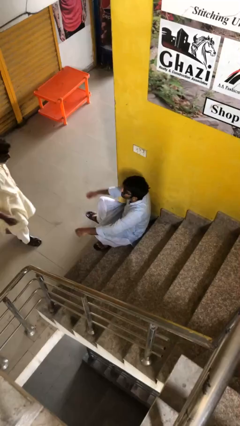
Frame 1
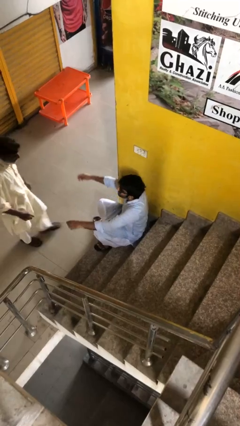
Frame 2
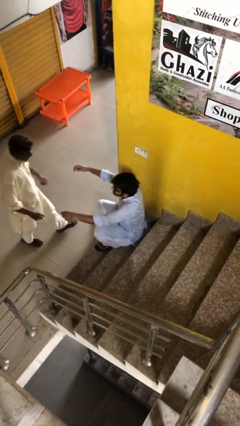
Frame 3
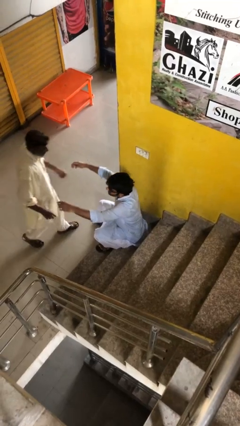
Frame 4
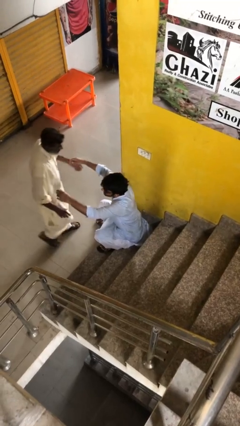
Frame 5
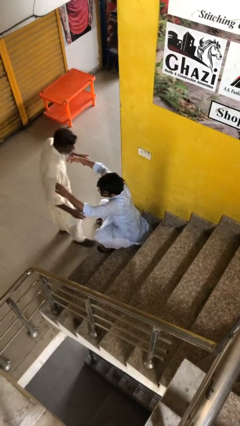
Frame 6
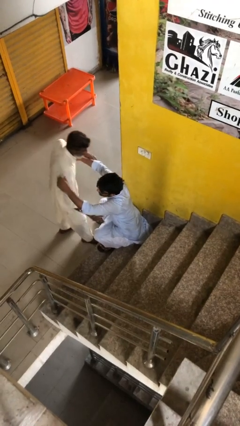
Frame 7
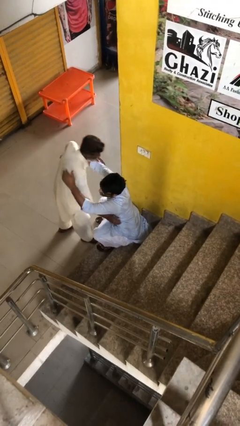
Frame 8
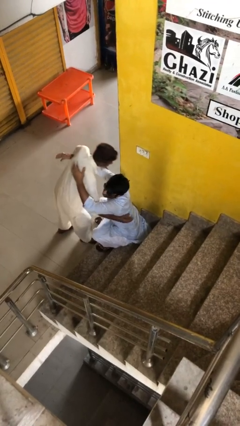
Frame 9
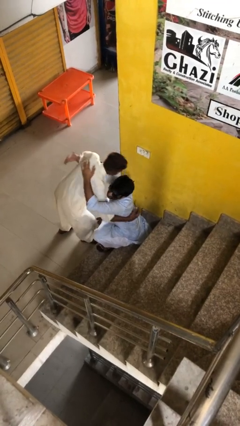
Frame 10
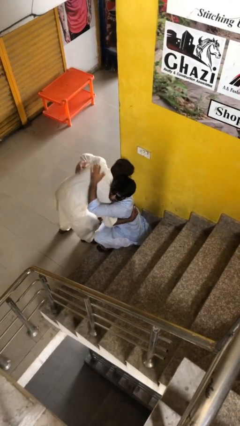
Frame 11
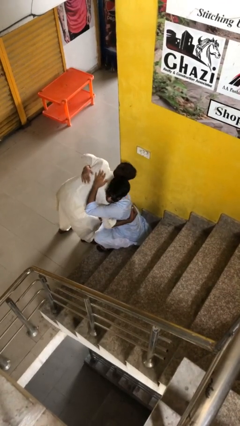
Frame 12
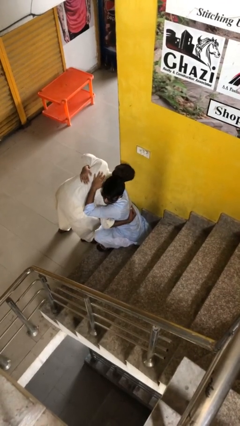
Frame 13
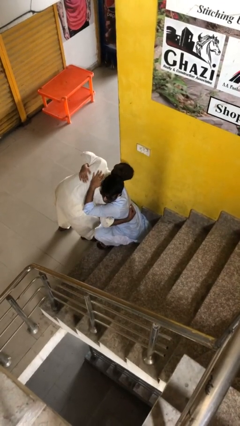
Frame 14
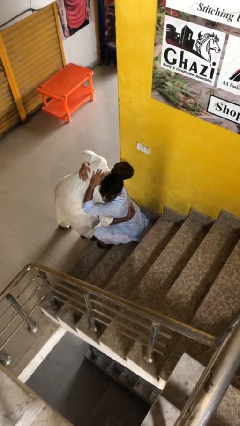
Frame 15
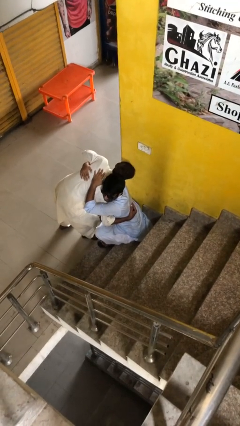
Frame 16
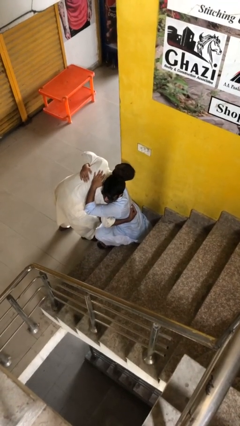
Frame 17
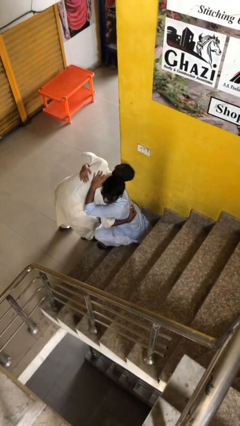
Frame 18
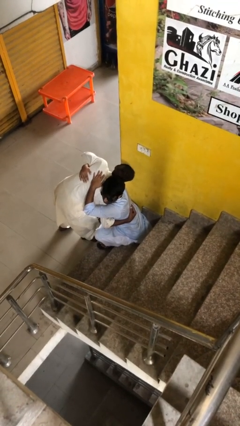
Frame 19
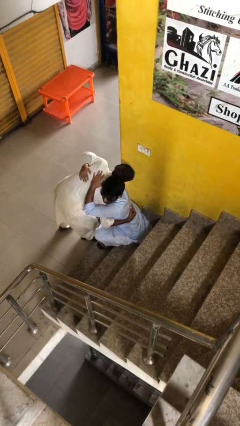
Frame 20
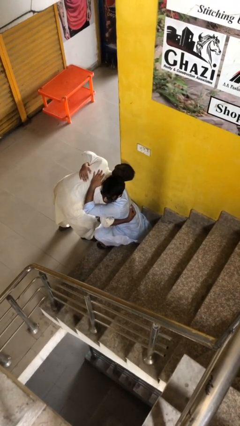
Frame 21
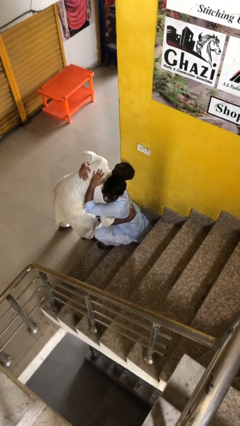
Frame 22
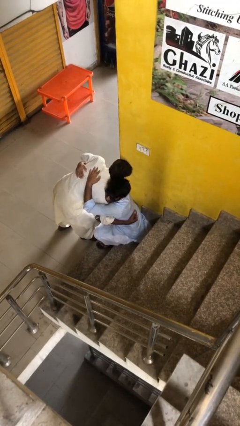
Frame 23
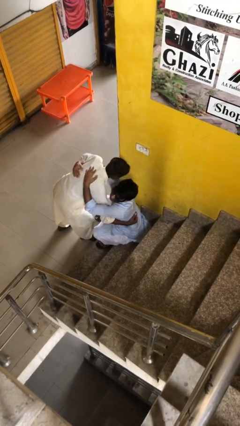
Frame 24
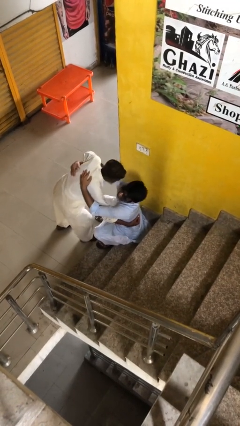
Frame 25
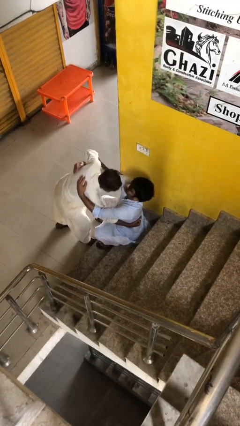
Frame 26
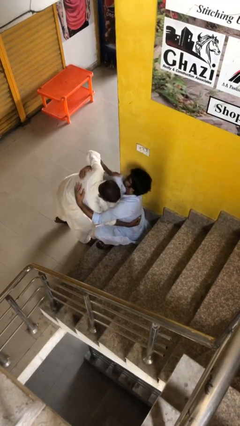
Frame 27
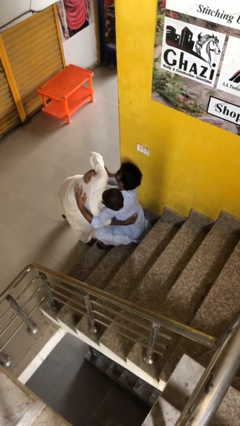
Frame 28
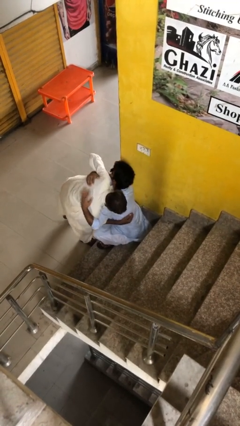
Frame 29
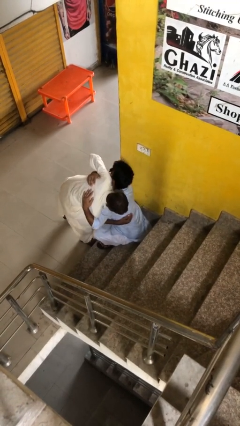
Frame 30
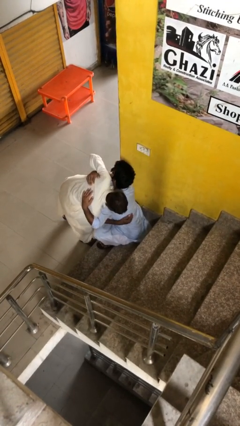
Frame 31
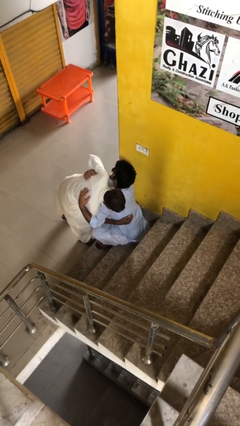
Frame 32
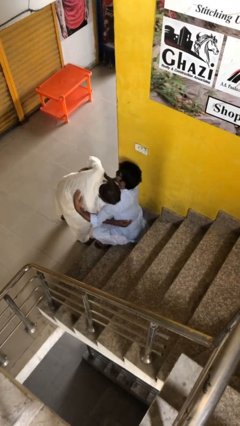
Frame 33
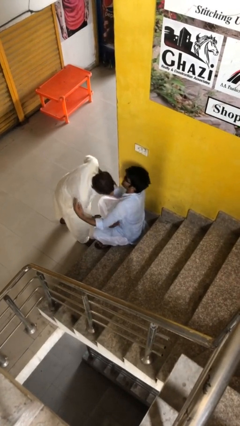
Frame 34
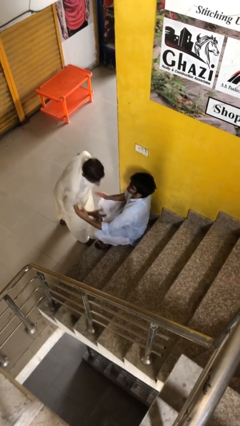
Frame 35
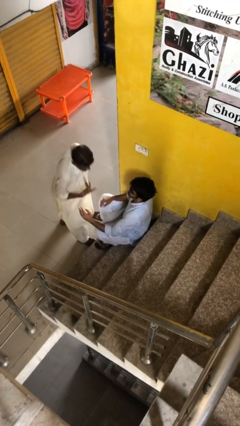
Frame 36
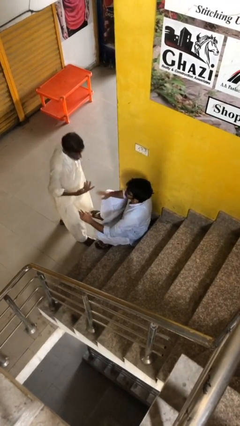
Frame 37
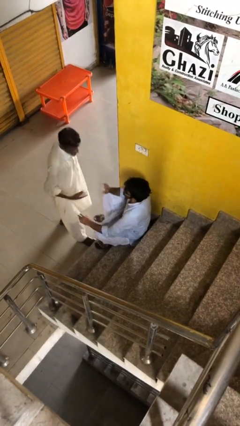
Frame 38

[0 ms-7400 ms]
person embraces person

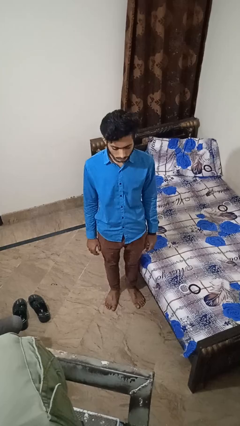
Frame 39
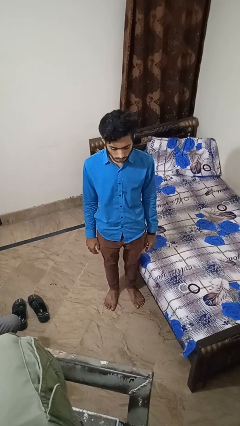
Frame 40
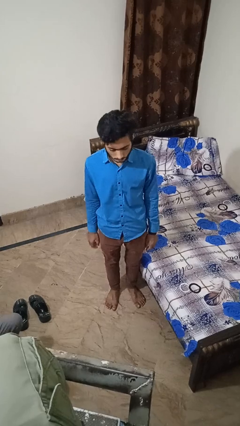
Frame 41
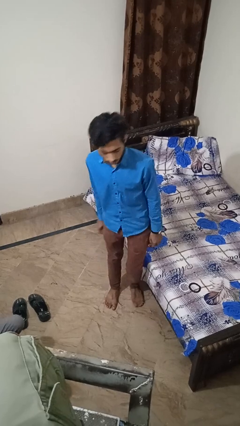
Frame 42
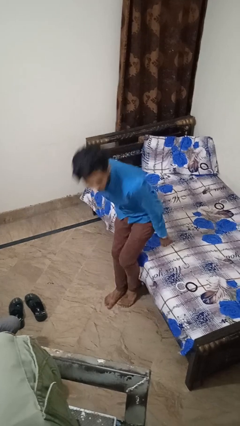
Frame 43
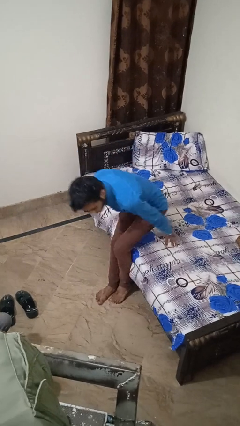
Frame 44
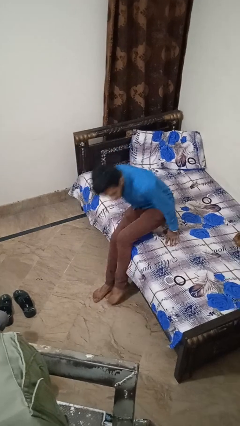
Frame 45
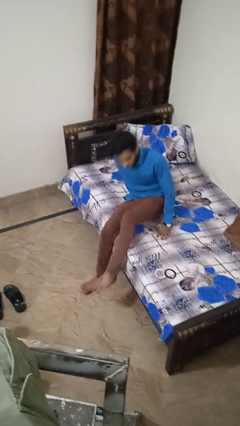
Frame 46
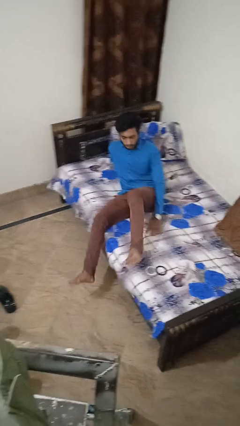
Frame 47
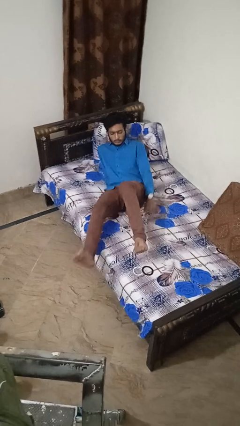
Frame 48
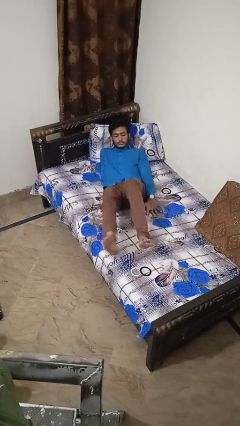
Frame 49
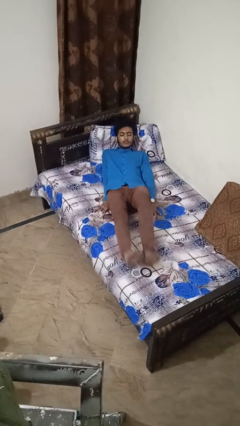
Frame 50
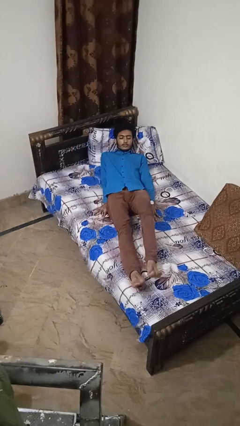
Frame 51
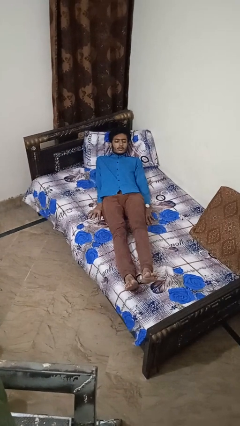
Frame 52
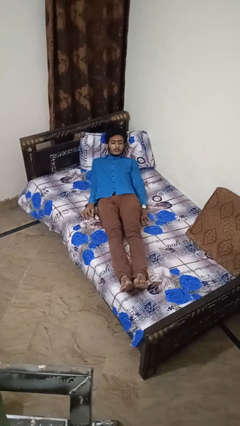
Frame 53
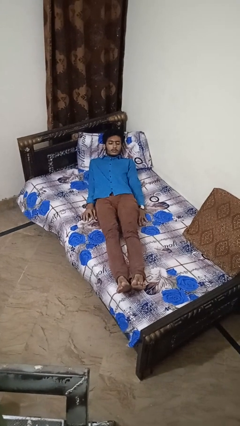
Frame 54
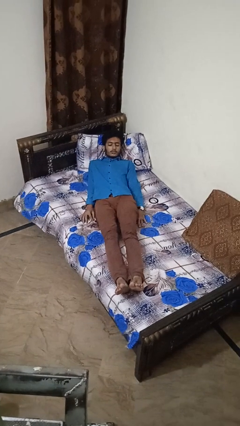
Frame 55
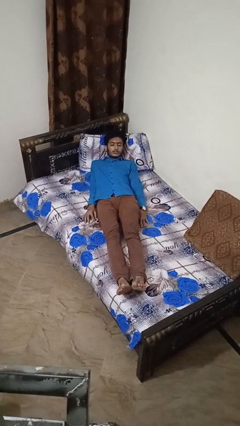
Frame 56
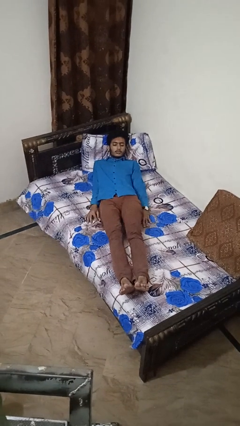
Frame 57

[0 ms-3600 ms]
person lies down on bed

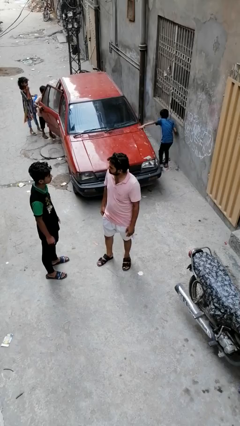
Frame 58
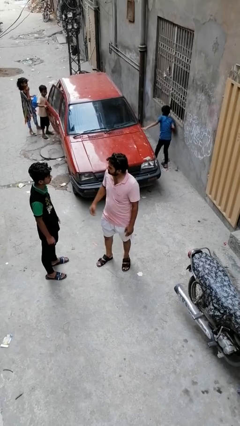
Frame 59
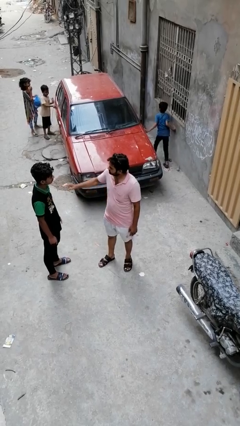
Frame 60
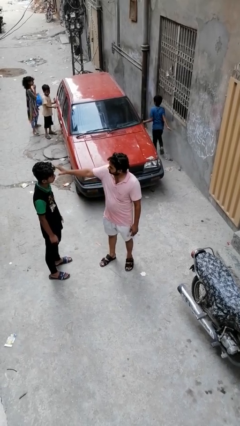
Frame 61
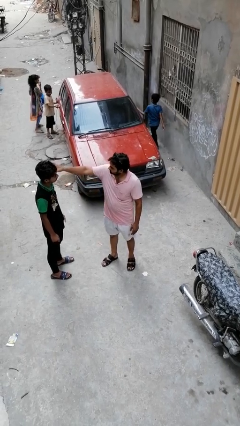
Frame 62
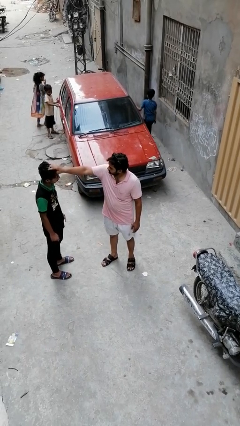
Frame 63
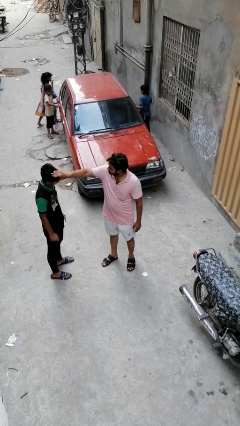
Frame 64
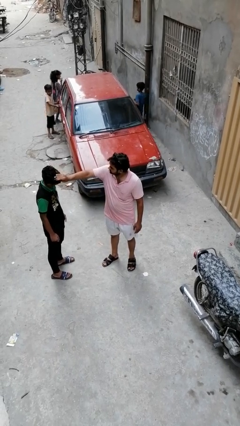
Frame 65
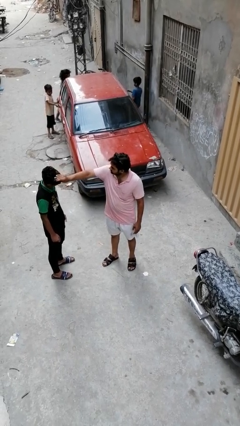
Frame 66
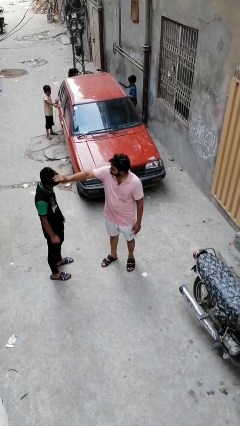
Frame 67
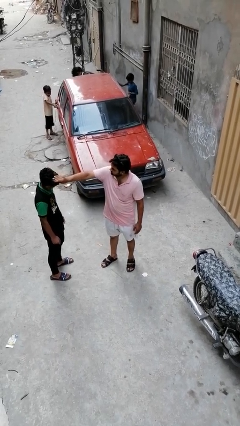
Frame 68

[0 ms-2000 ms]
person grabs person by hair

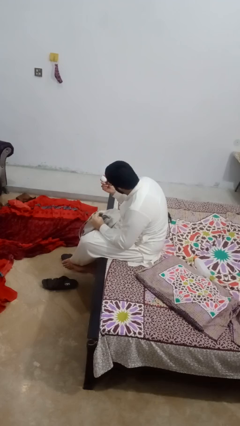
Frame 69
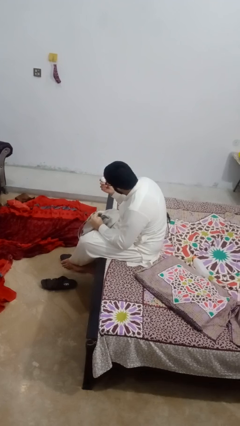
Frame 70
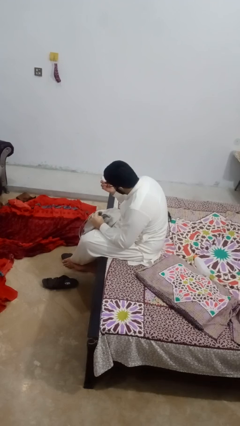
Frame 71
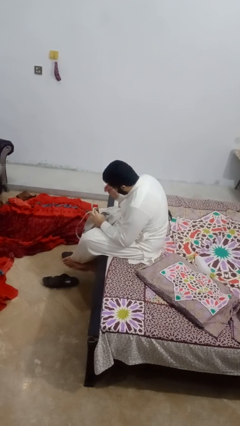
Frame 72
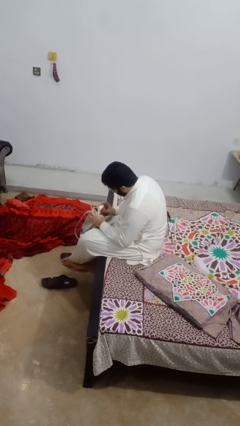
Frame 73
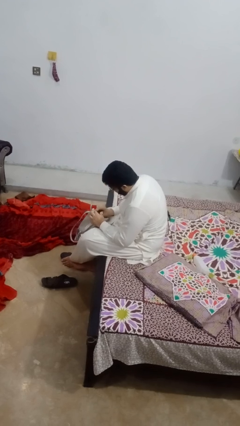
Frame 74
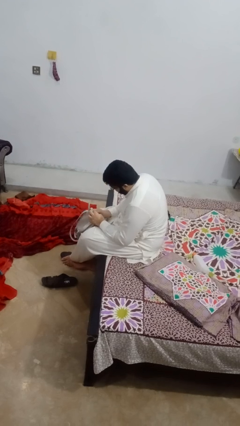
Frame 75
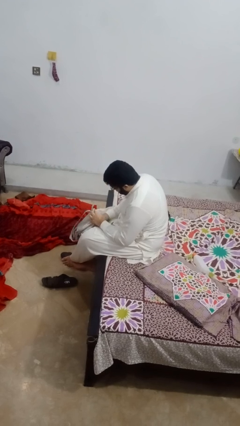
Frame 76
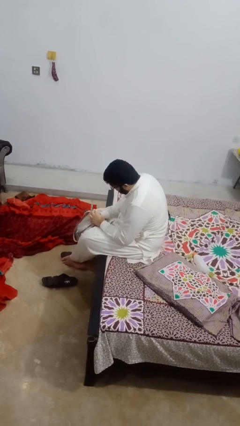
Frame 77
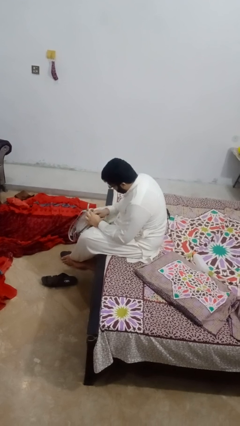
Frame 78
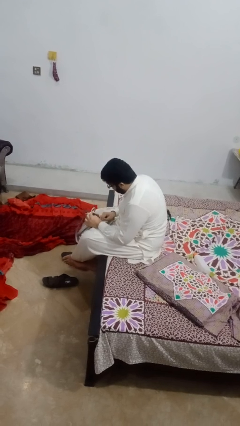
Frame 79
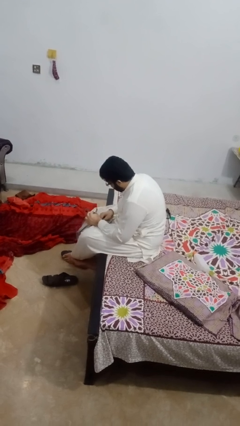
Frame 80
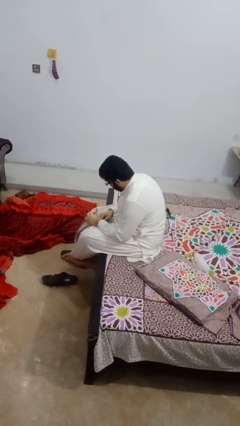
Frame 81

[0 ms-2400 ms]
person puts object into purse

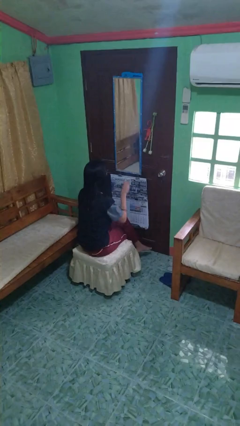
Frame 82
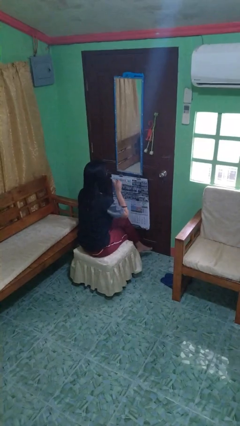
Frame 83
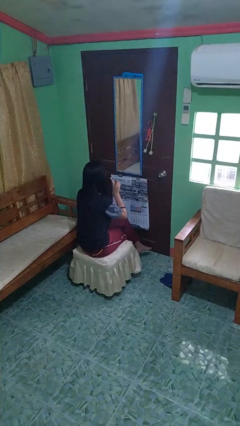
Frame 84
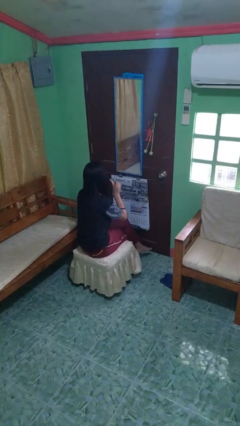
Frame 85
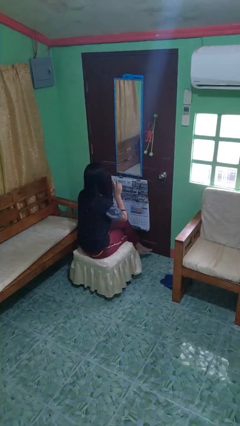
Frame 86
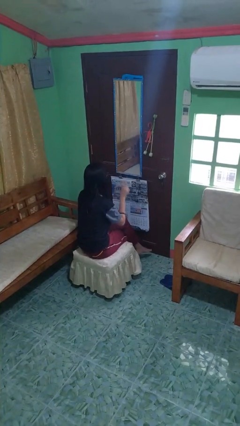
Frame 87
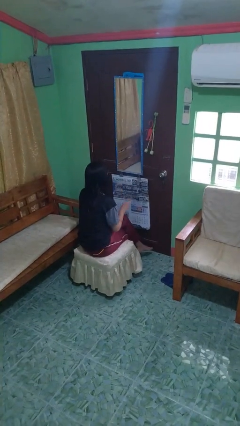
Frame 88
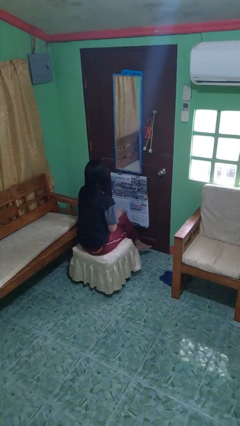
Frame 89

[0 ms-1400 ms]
person gestures peace

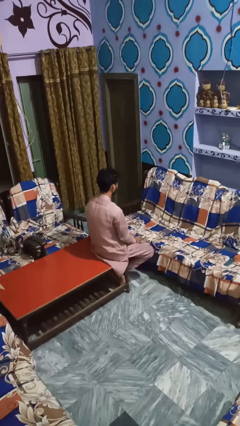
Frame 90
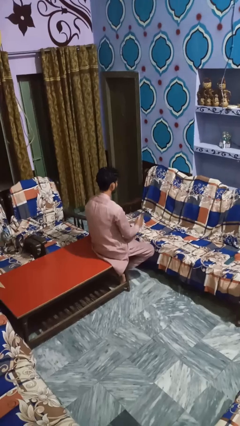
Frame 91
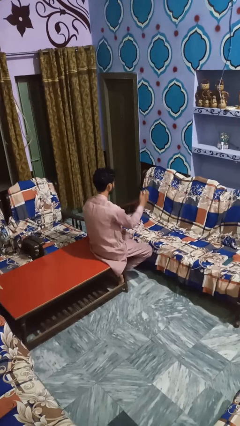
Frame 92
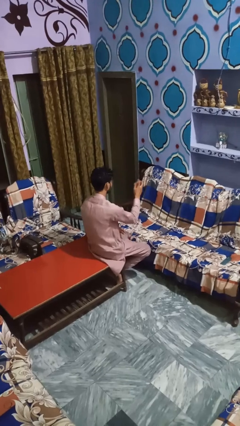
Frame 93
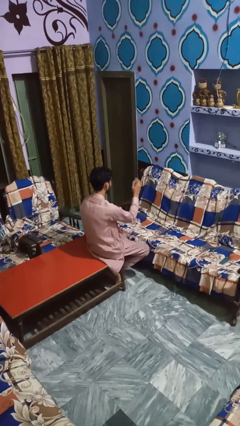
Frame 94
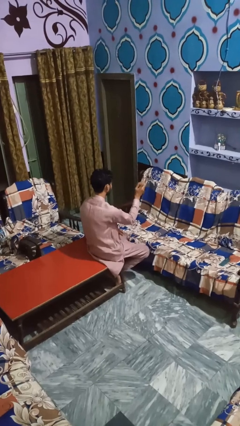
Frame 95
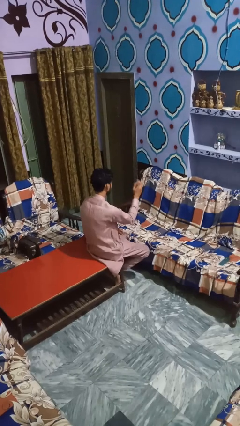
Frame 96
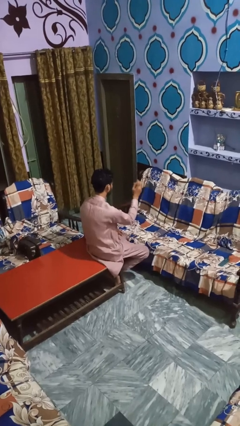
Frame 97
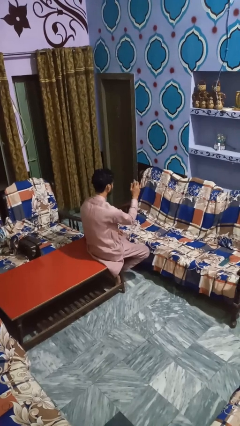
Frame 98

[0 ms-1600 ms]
person sprays from bottle
